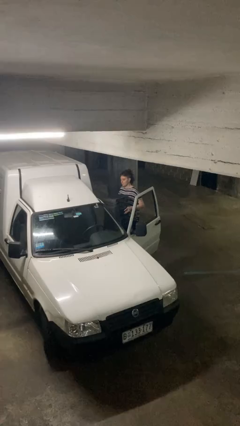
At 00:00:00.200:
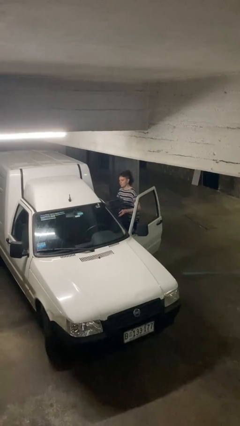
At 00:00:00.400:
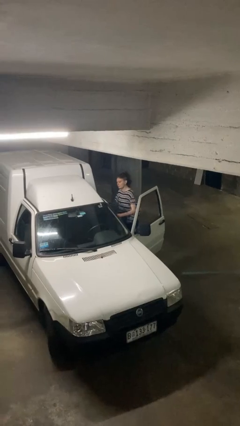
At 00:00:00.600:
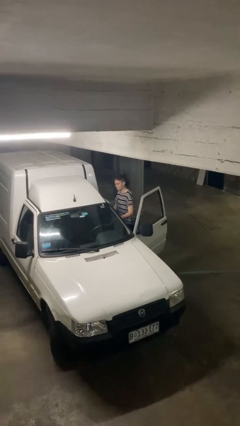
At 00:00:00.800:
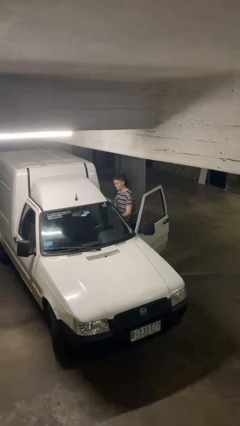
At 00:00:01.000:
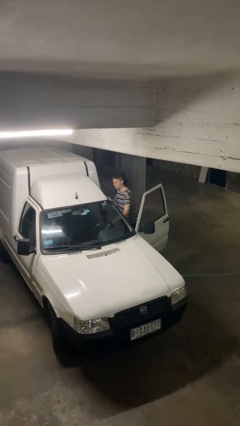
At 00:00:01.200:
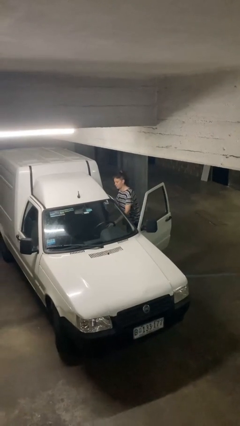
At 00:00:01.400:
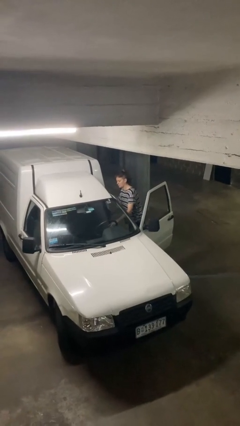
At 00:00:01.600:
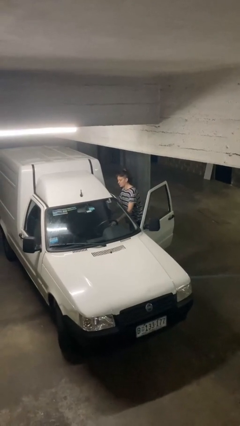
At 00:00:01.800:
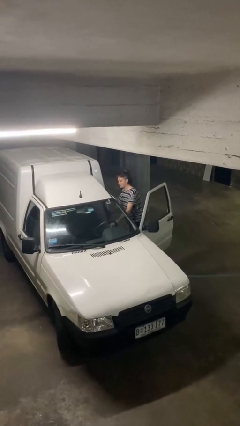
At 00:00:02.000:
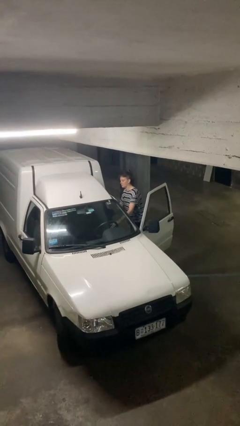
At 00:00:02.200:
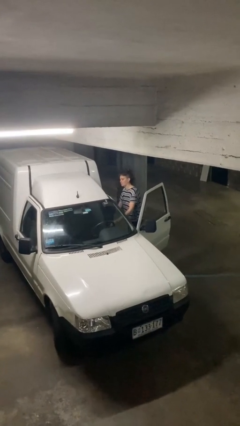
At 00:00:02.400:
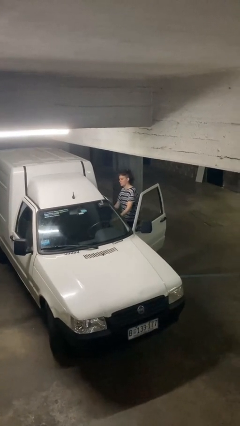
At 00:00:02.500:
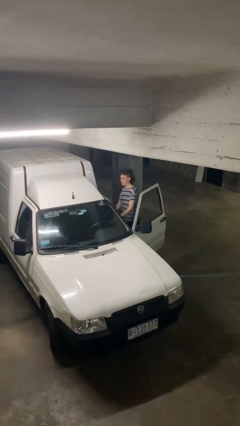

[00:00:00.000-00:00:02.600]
person loads car

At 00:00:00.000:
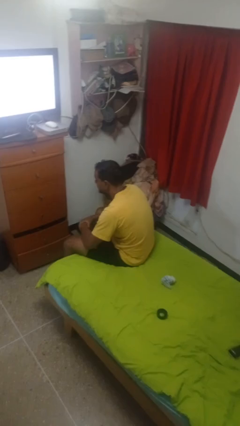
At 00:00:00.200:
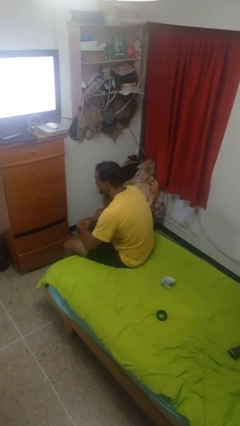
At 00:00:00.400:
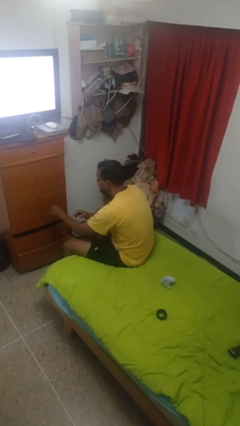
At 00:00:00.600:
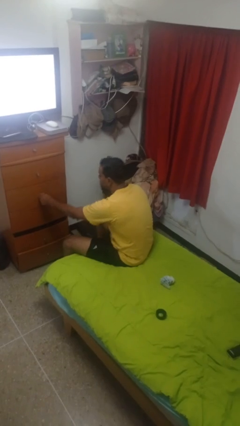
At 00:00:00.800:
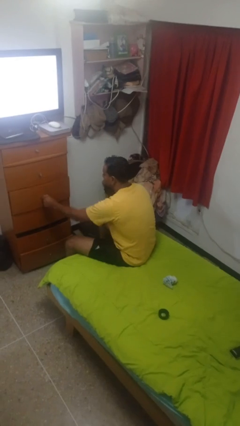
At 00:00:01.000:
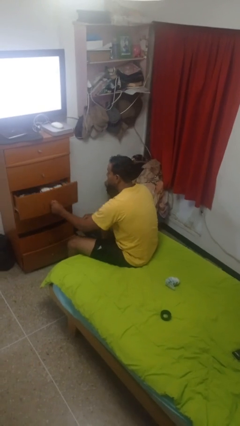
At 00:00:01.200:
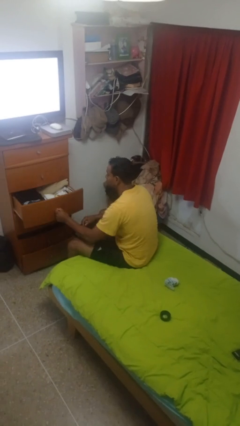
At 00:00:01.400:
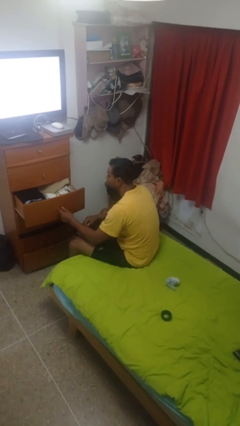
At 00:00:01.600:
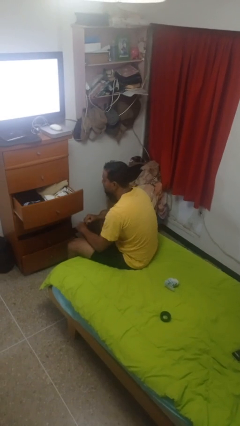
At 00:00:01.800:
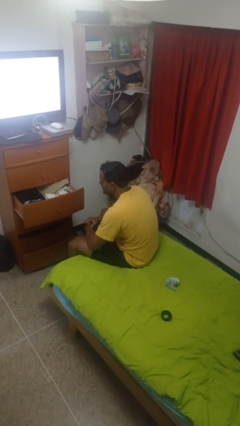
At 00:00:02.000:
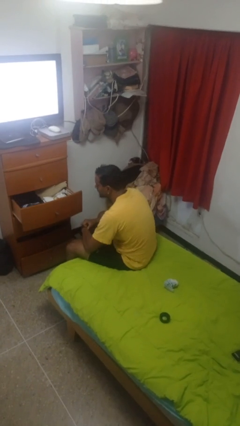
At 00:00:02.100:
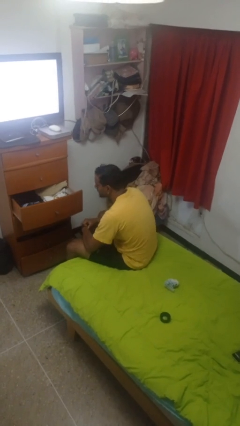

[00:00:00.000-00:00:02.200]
person opens dresser drawer

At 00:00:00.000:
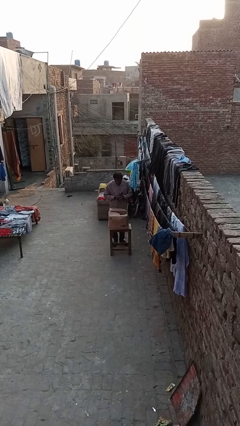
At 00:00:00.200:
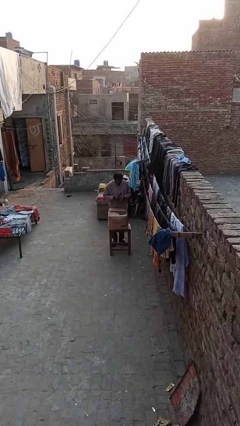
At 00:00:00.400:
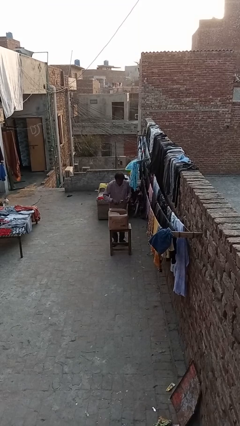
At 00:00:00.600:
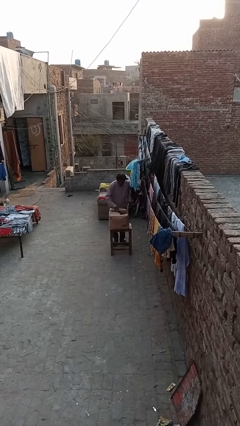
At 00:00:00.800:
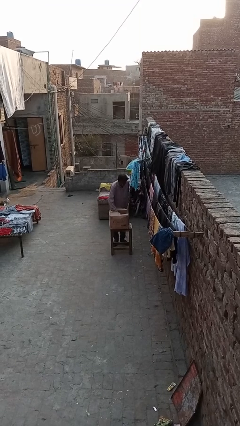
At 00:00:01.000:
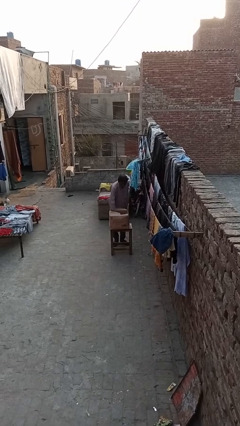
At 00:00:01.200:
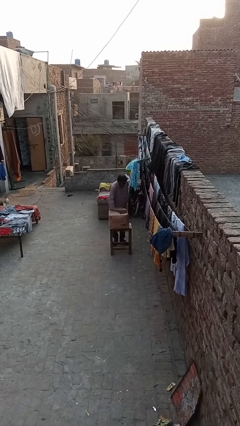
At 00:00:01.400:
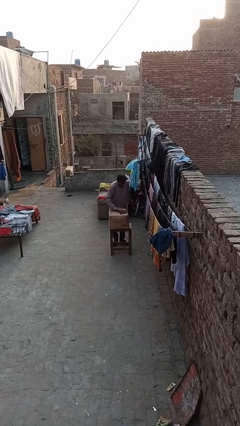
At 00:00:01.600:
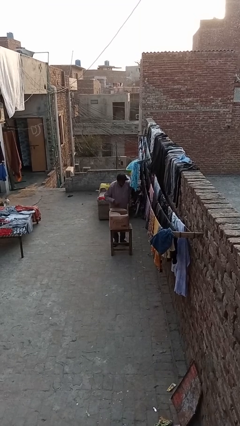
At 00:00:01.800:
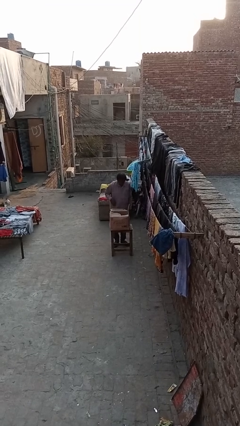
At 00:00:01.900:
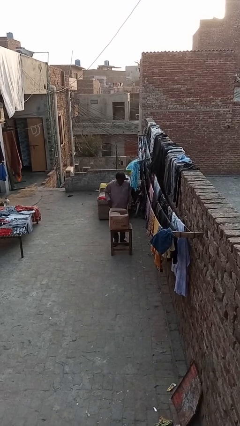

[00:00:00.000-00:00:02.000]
person puts object into box

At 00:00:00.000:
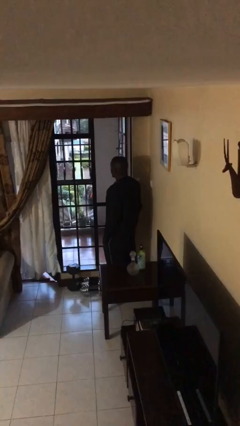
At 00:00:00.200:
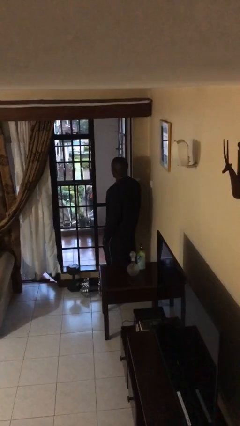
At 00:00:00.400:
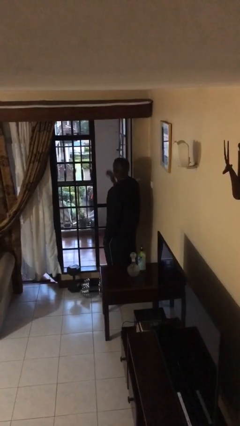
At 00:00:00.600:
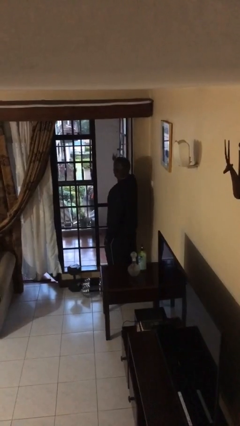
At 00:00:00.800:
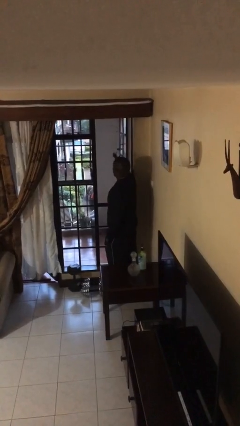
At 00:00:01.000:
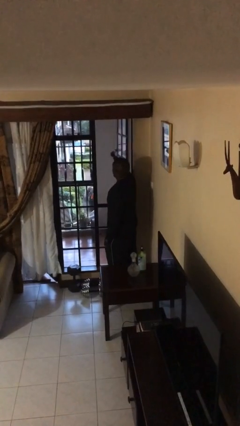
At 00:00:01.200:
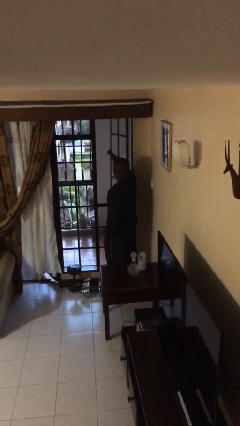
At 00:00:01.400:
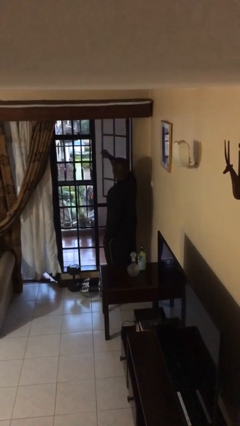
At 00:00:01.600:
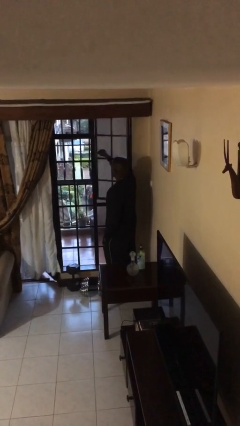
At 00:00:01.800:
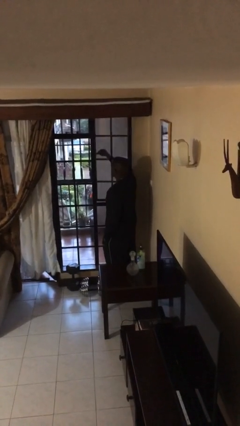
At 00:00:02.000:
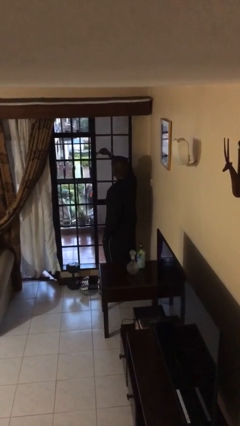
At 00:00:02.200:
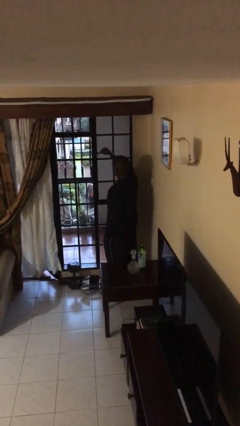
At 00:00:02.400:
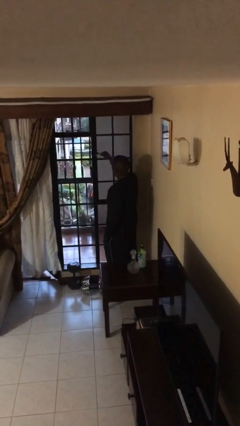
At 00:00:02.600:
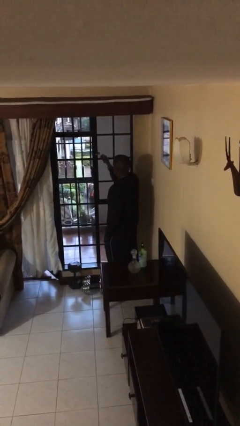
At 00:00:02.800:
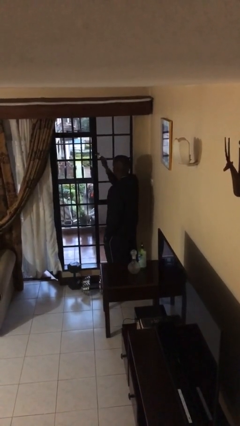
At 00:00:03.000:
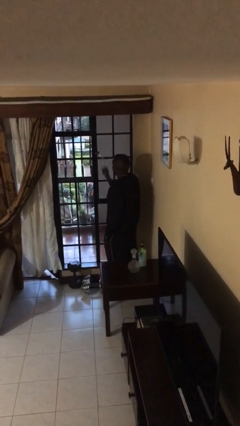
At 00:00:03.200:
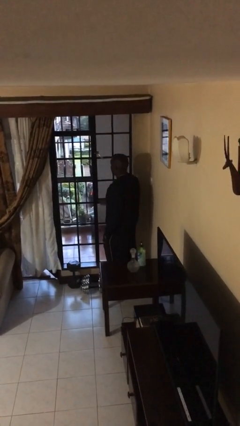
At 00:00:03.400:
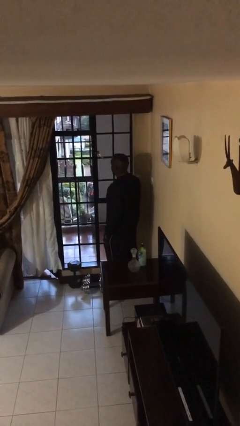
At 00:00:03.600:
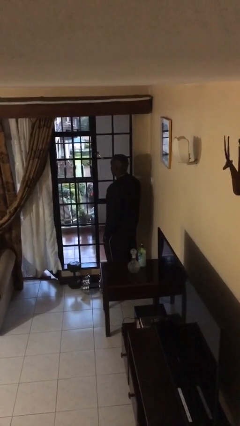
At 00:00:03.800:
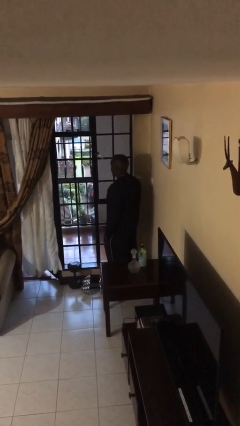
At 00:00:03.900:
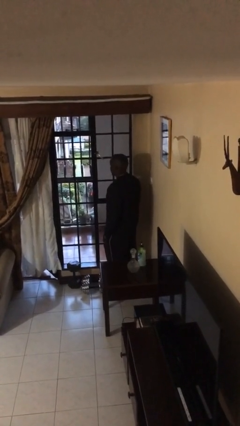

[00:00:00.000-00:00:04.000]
person closes home window

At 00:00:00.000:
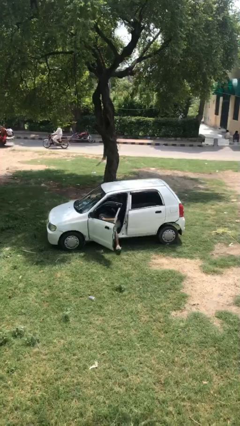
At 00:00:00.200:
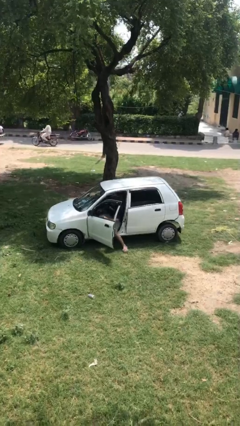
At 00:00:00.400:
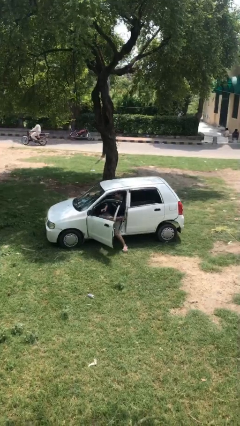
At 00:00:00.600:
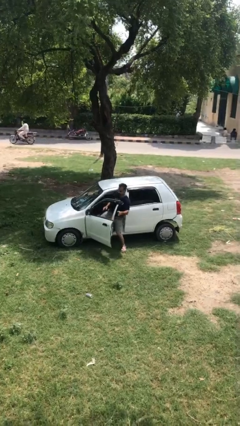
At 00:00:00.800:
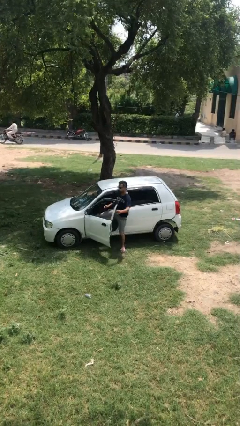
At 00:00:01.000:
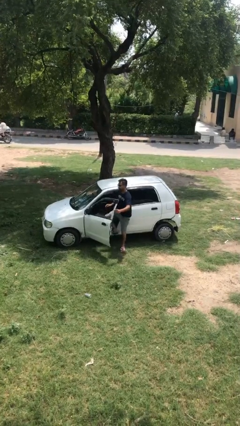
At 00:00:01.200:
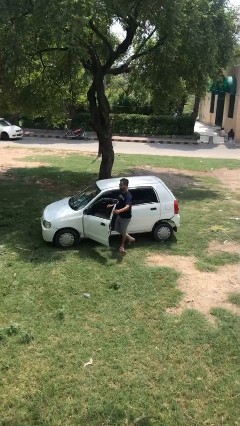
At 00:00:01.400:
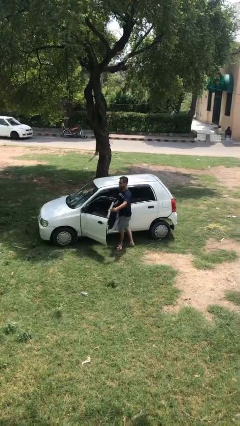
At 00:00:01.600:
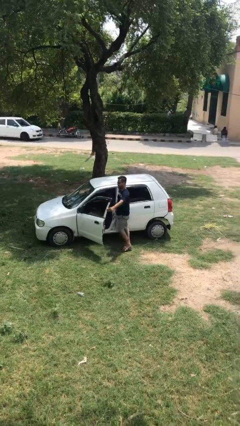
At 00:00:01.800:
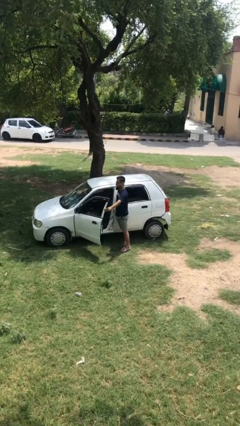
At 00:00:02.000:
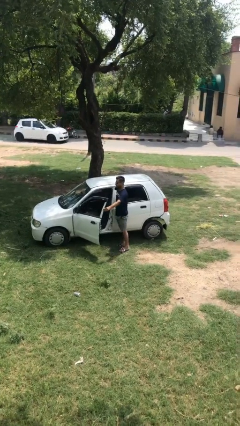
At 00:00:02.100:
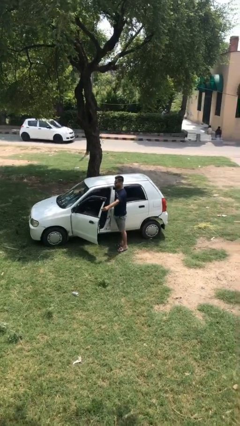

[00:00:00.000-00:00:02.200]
person exits car

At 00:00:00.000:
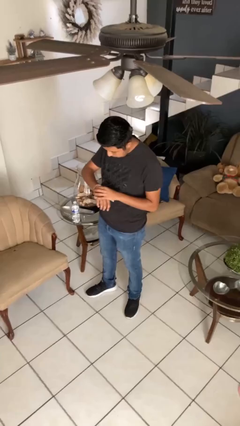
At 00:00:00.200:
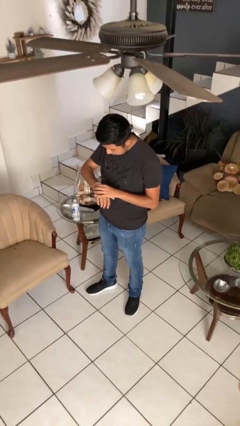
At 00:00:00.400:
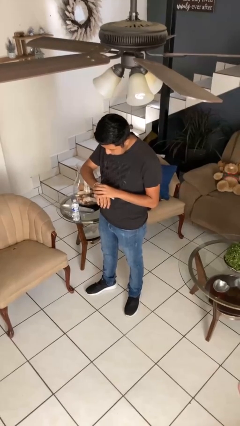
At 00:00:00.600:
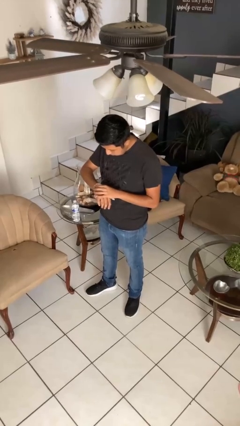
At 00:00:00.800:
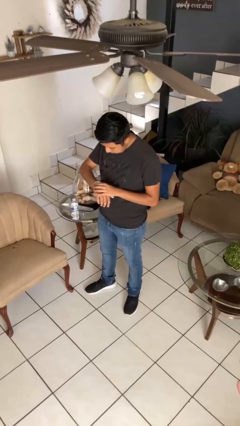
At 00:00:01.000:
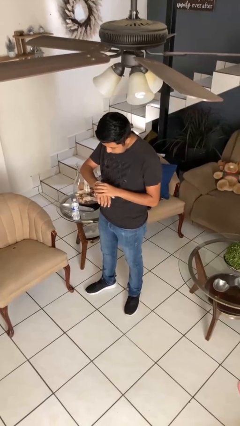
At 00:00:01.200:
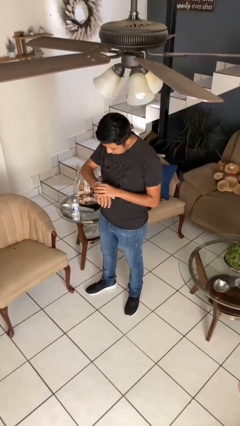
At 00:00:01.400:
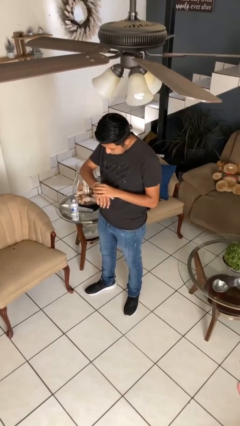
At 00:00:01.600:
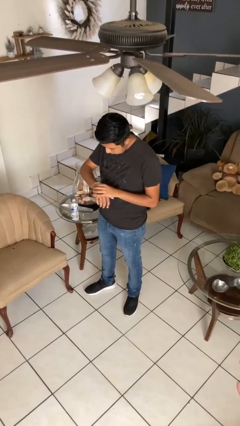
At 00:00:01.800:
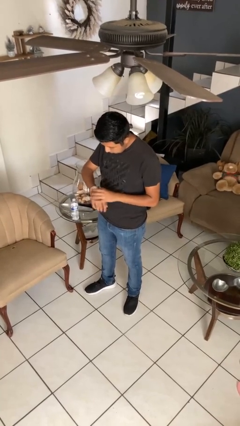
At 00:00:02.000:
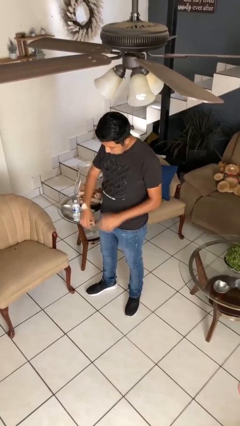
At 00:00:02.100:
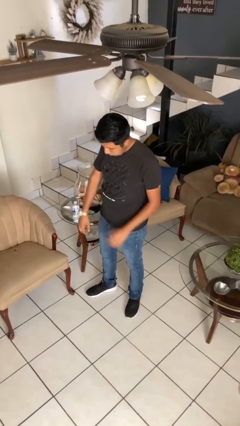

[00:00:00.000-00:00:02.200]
person looks at wristwatch

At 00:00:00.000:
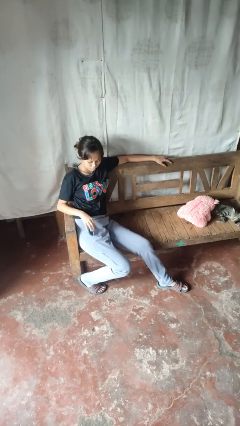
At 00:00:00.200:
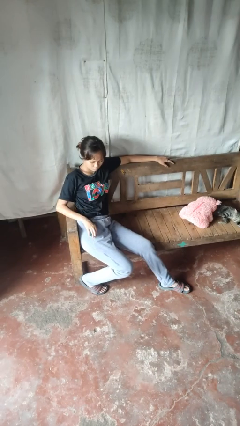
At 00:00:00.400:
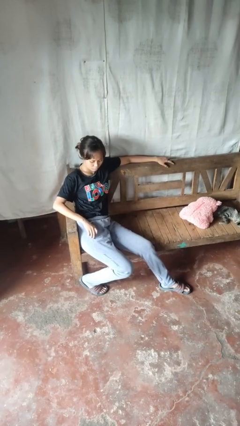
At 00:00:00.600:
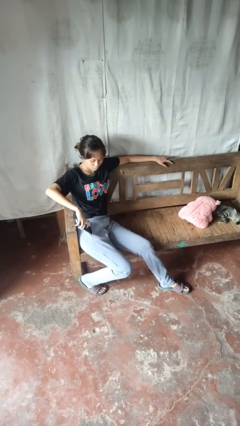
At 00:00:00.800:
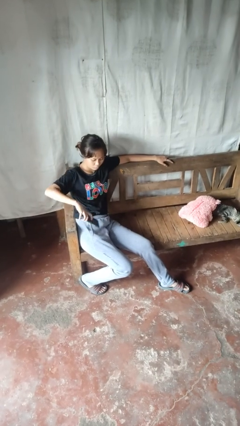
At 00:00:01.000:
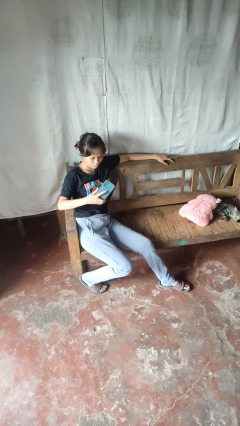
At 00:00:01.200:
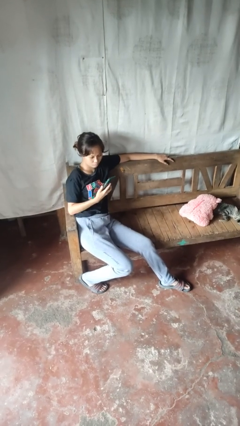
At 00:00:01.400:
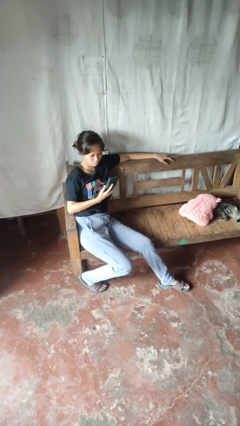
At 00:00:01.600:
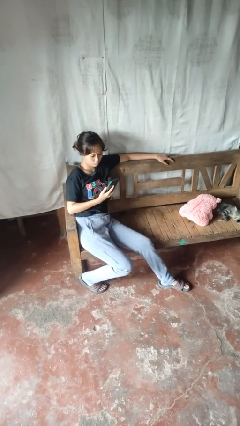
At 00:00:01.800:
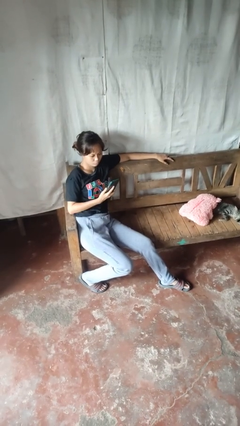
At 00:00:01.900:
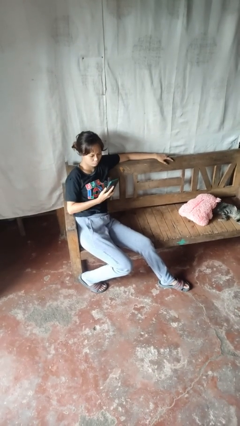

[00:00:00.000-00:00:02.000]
person takes phone from pocket
